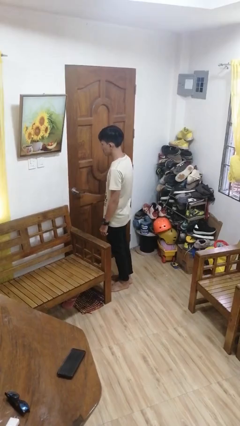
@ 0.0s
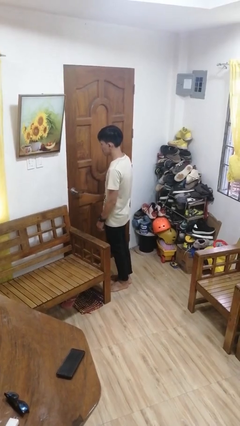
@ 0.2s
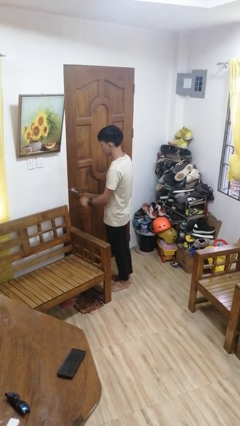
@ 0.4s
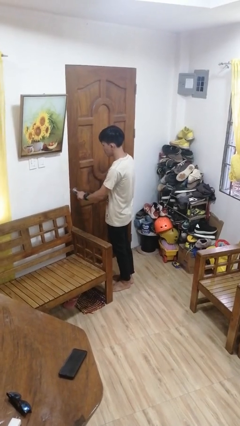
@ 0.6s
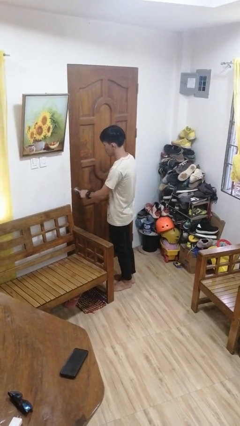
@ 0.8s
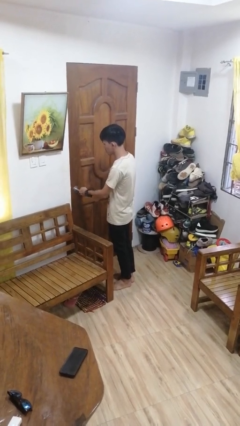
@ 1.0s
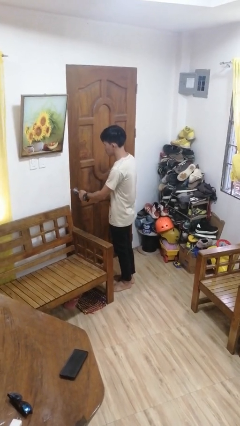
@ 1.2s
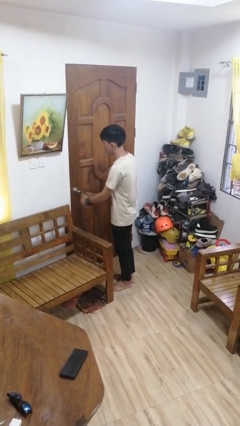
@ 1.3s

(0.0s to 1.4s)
person locks door with keys

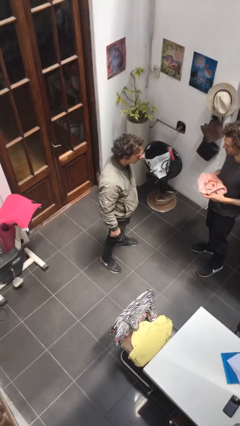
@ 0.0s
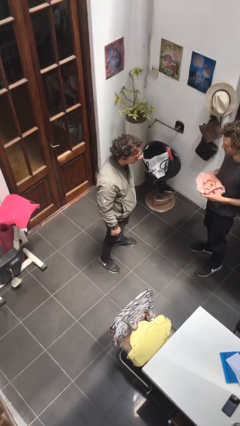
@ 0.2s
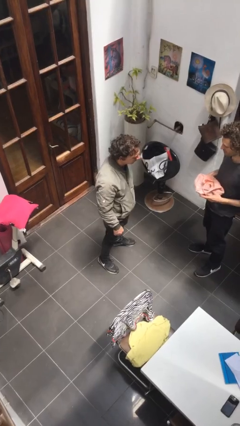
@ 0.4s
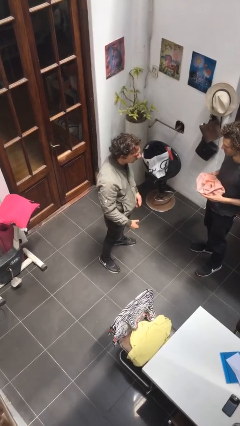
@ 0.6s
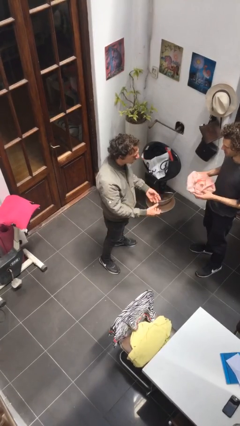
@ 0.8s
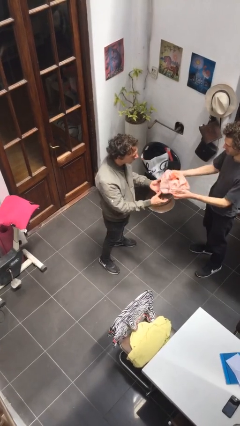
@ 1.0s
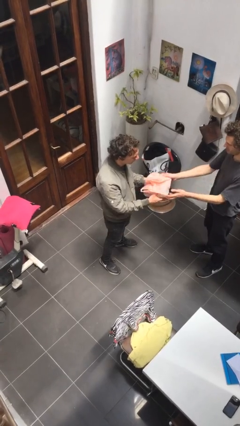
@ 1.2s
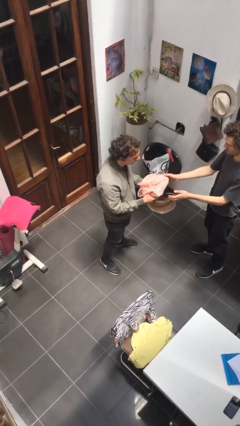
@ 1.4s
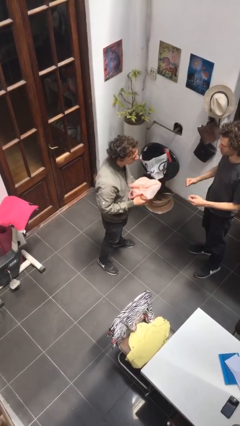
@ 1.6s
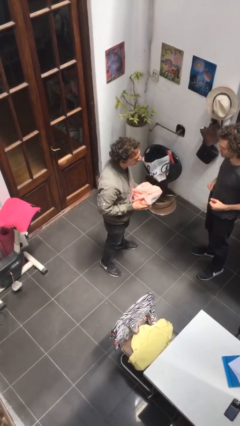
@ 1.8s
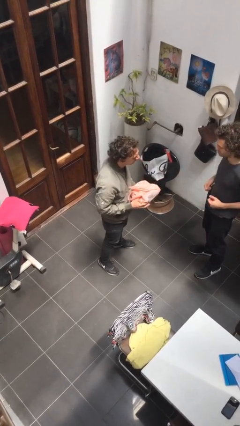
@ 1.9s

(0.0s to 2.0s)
person transfers object to person

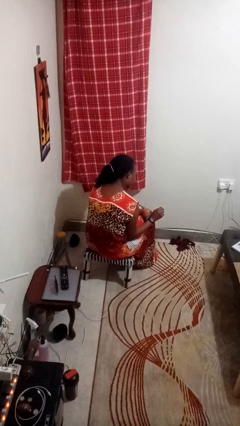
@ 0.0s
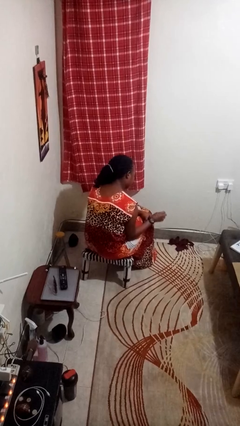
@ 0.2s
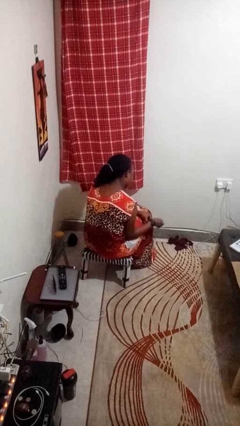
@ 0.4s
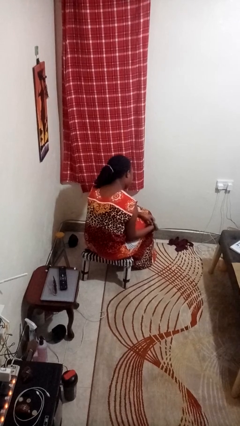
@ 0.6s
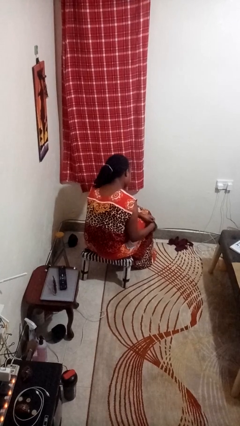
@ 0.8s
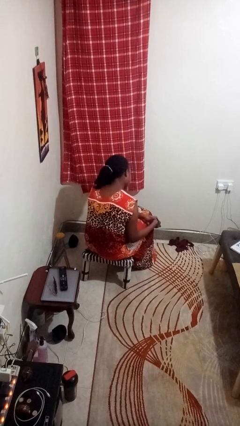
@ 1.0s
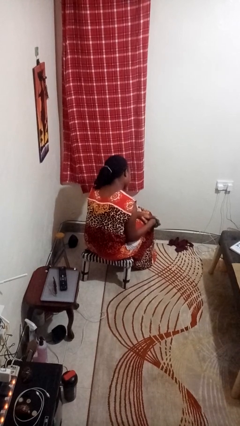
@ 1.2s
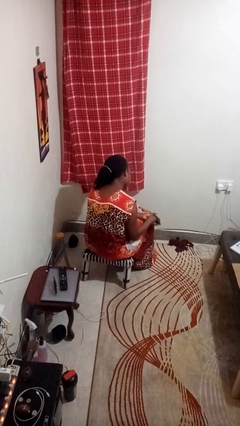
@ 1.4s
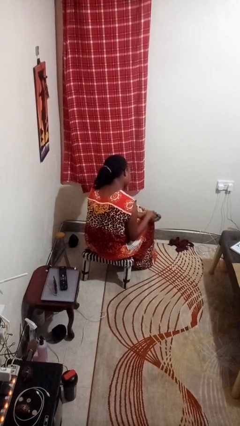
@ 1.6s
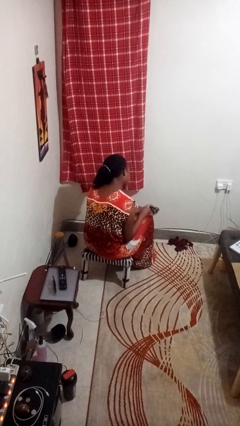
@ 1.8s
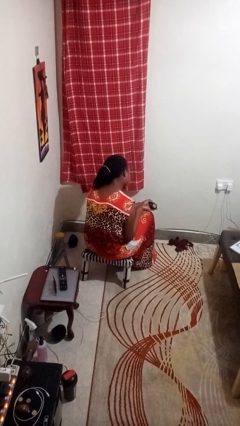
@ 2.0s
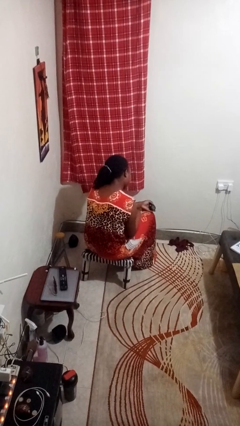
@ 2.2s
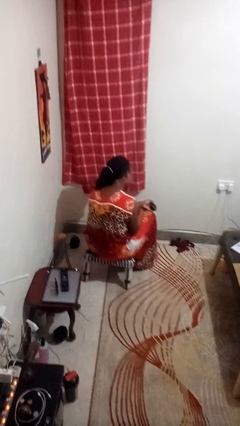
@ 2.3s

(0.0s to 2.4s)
person takes off wristwatch

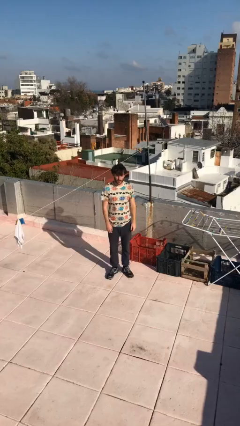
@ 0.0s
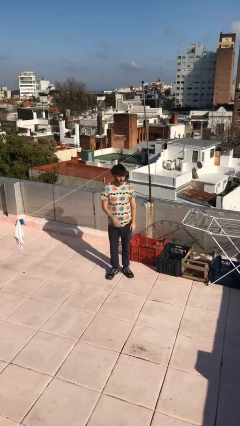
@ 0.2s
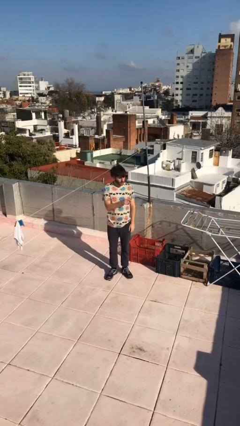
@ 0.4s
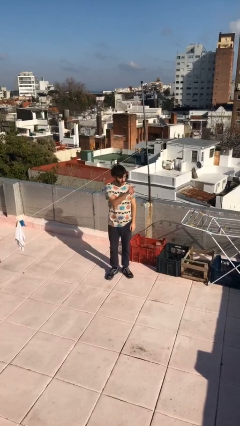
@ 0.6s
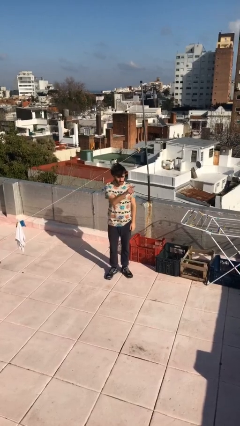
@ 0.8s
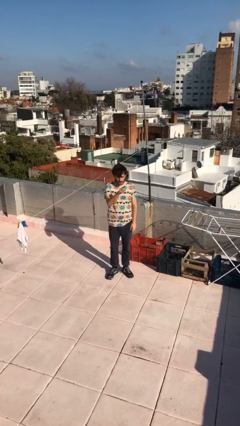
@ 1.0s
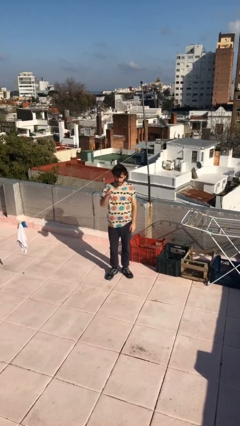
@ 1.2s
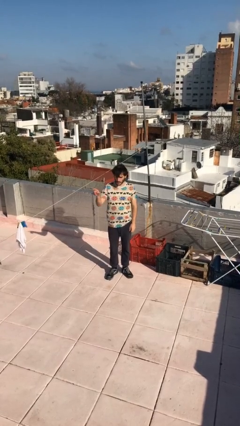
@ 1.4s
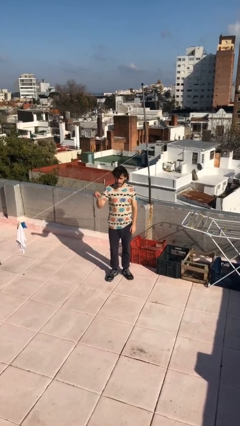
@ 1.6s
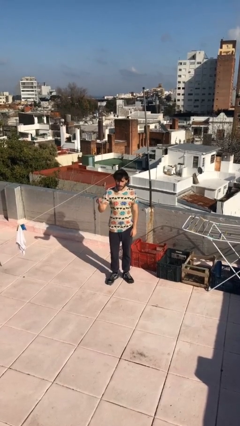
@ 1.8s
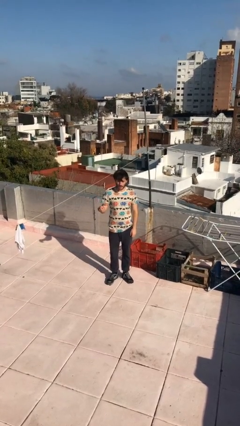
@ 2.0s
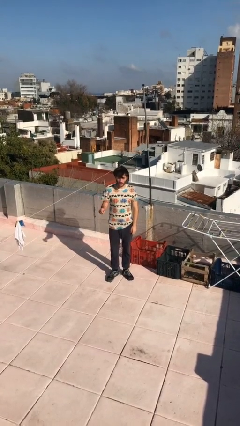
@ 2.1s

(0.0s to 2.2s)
person gestures swipe right

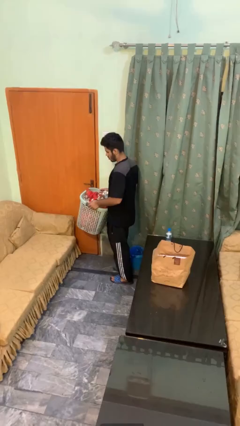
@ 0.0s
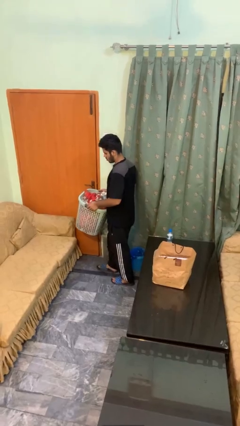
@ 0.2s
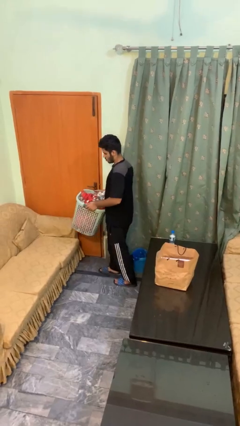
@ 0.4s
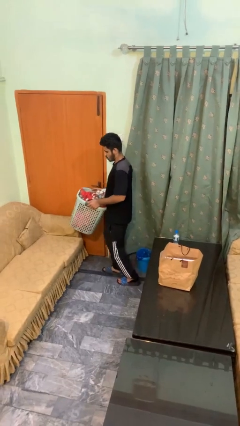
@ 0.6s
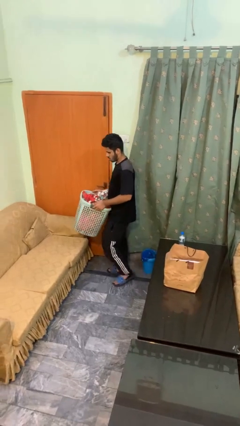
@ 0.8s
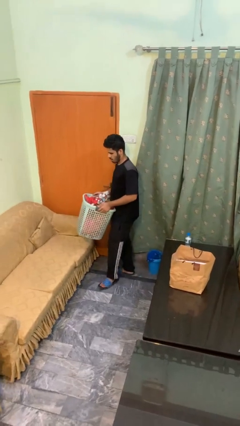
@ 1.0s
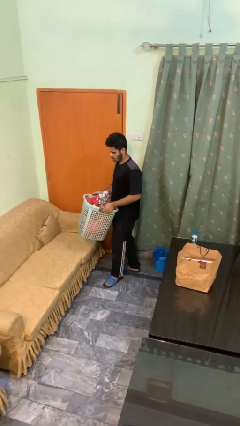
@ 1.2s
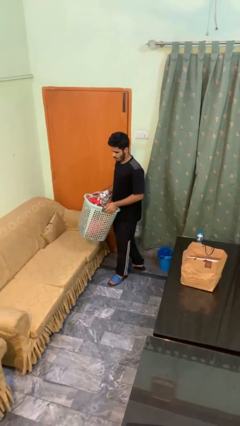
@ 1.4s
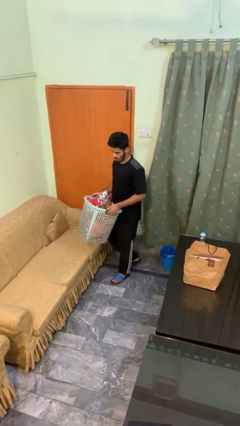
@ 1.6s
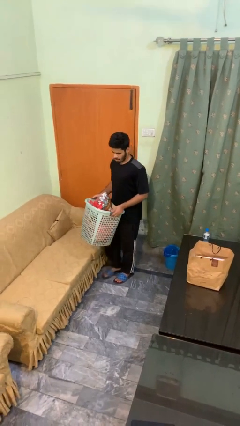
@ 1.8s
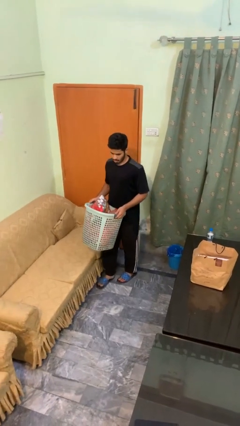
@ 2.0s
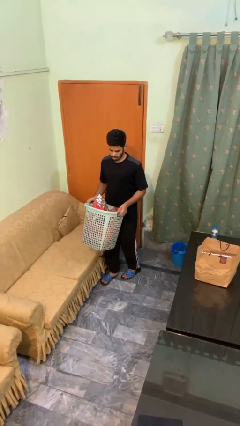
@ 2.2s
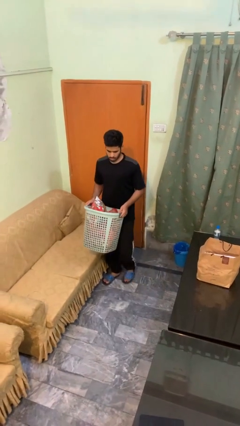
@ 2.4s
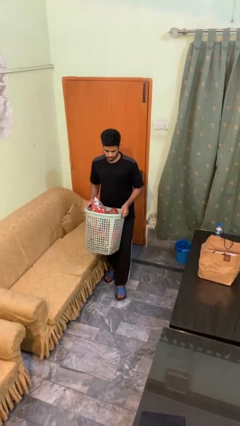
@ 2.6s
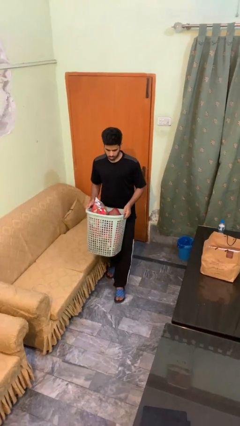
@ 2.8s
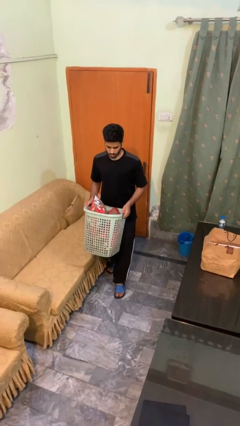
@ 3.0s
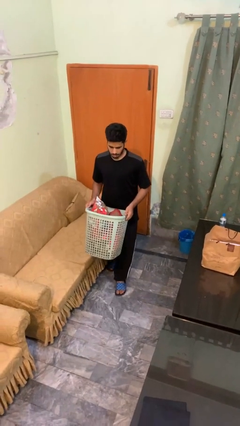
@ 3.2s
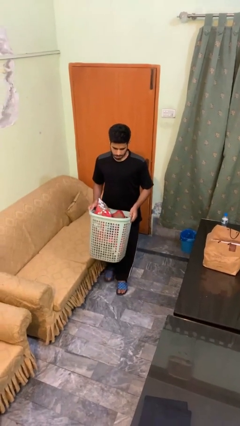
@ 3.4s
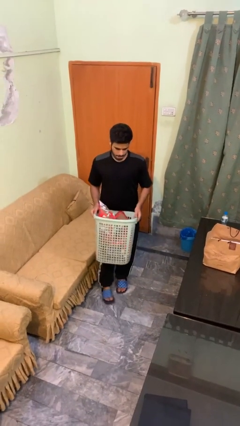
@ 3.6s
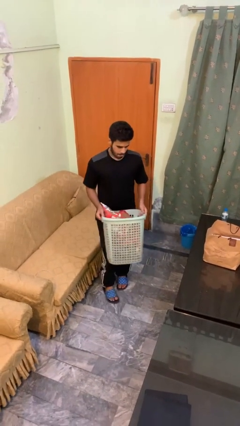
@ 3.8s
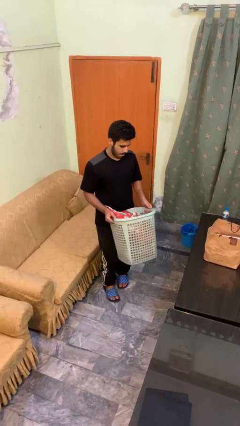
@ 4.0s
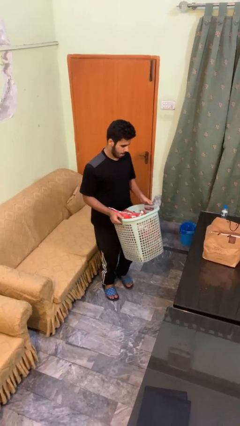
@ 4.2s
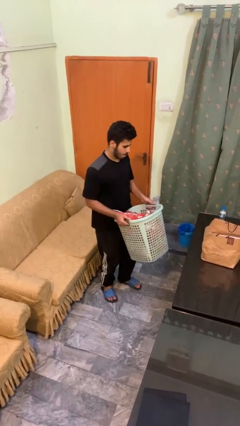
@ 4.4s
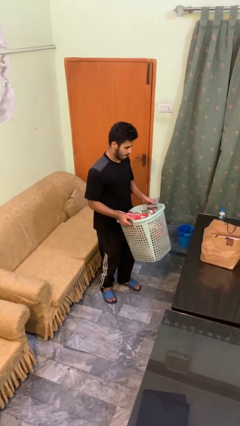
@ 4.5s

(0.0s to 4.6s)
person carries laundry basket

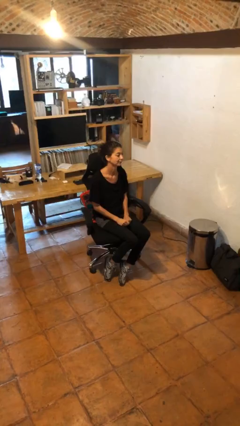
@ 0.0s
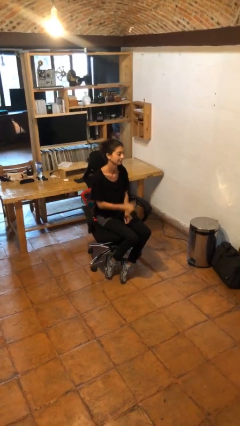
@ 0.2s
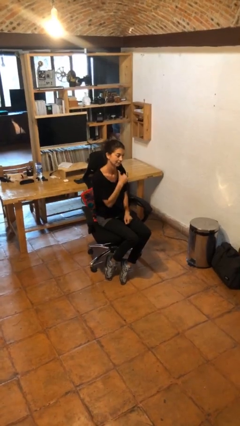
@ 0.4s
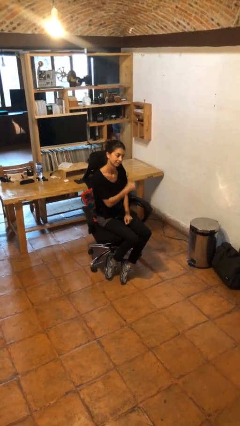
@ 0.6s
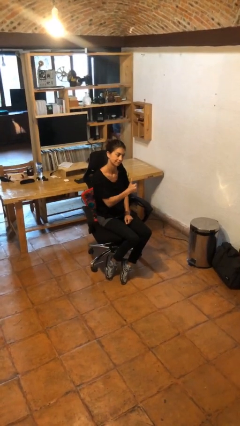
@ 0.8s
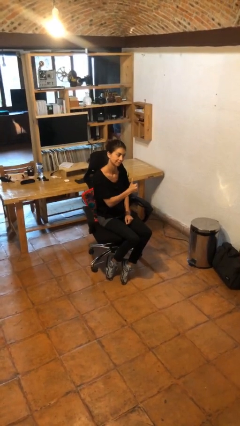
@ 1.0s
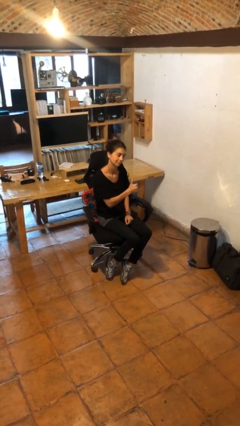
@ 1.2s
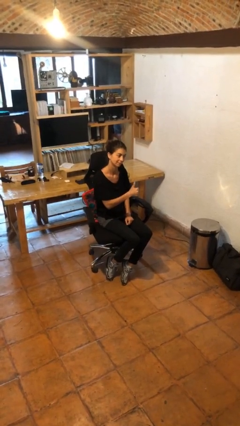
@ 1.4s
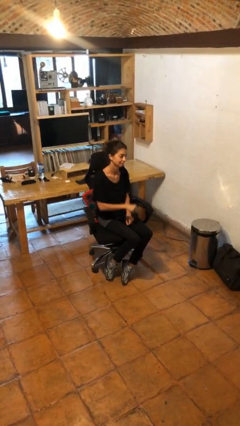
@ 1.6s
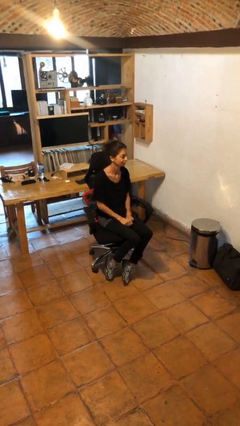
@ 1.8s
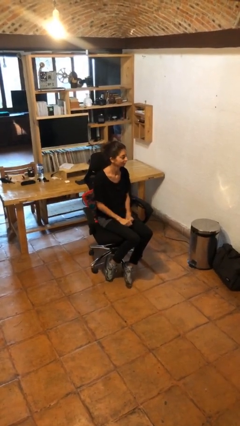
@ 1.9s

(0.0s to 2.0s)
person gestures thumbs up

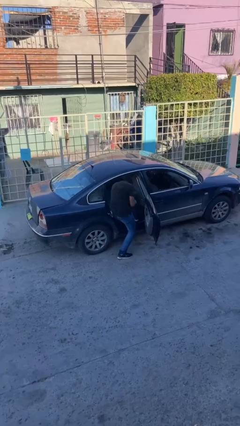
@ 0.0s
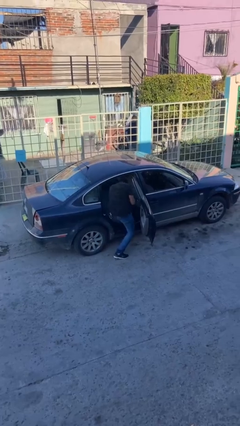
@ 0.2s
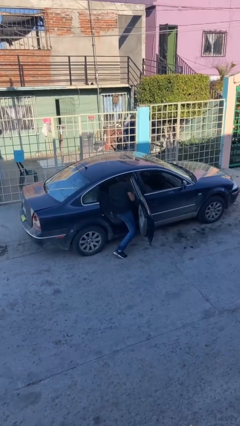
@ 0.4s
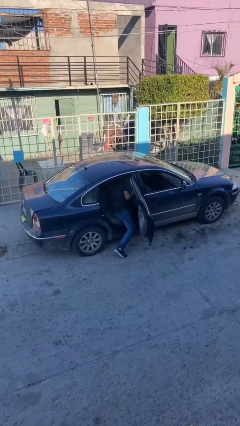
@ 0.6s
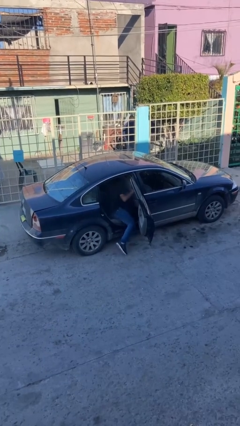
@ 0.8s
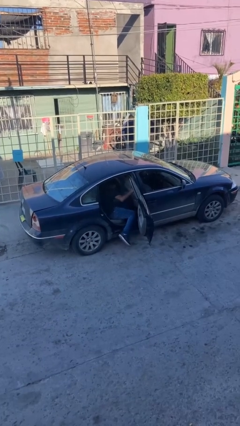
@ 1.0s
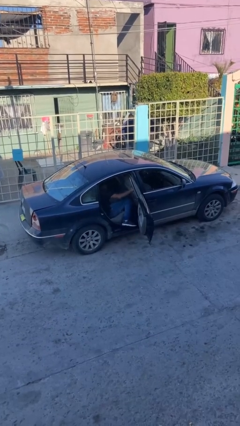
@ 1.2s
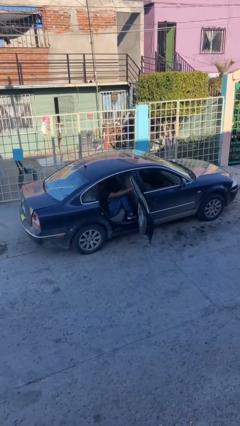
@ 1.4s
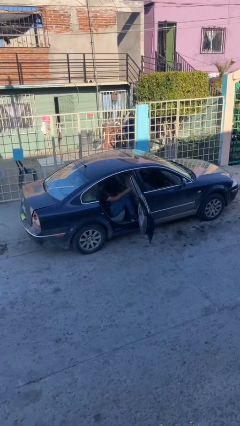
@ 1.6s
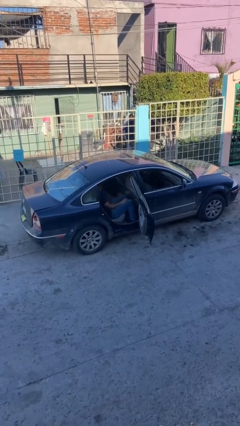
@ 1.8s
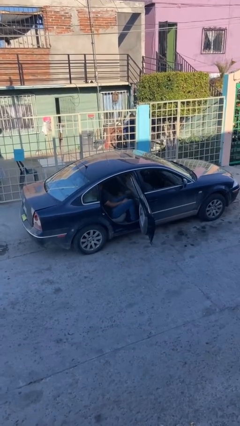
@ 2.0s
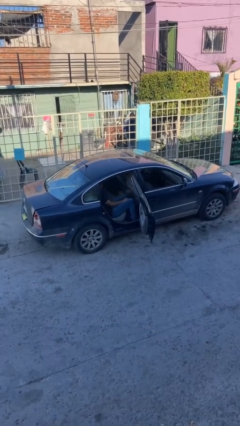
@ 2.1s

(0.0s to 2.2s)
person enters car
